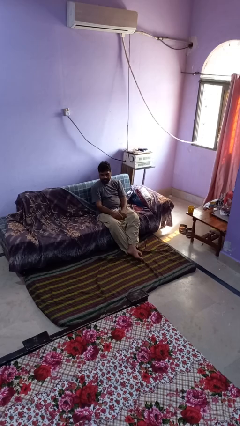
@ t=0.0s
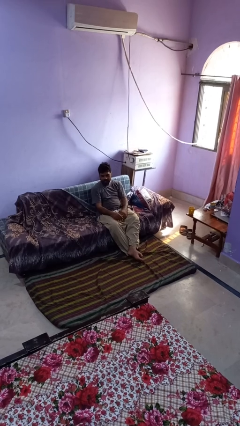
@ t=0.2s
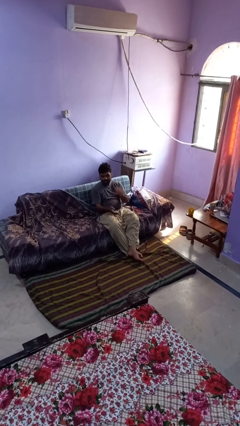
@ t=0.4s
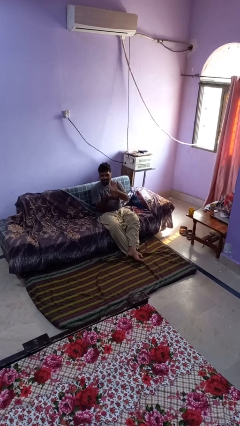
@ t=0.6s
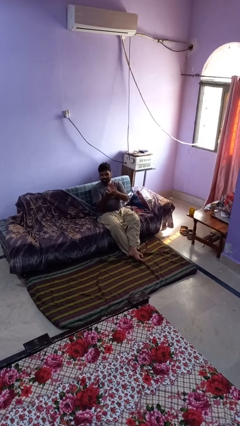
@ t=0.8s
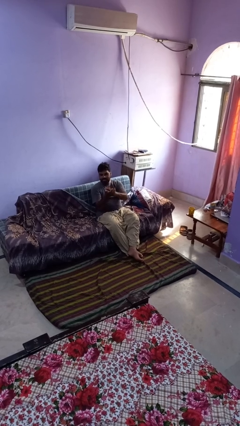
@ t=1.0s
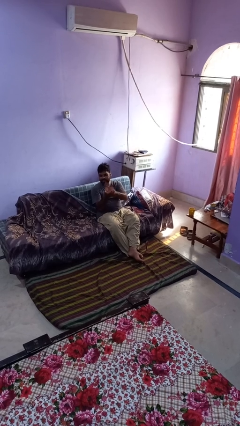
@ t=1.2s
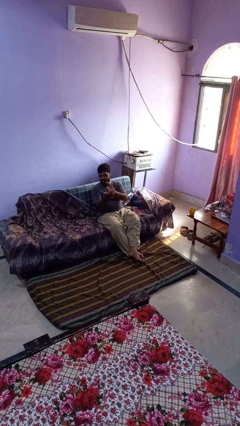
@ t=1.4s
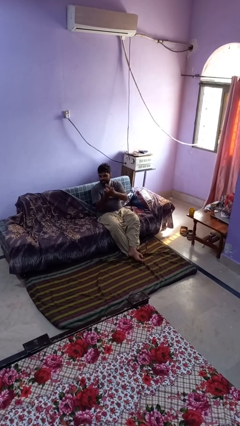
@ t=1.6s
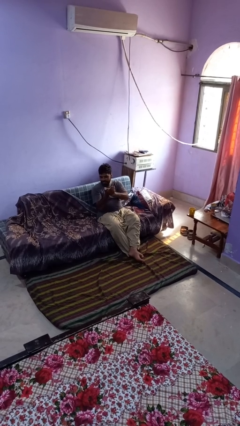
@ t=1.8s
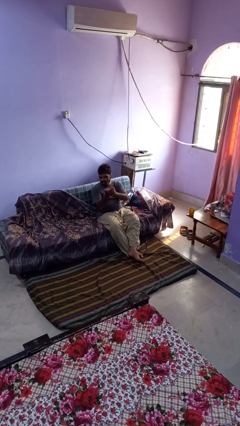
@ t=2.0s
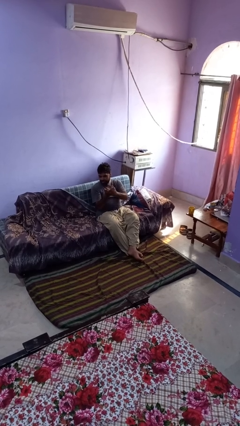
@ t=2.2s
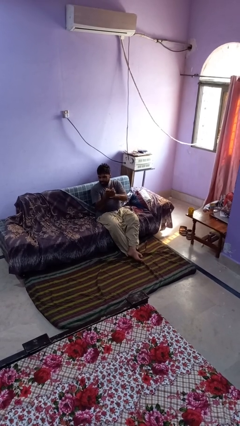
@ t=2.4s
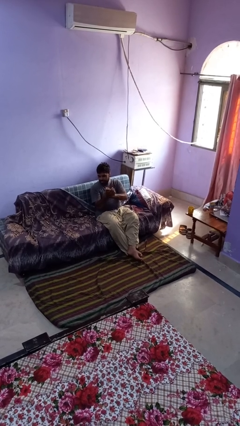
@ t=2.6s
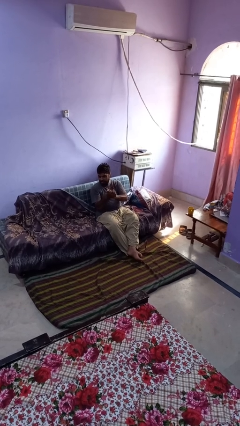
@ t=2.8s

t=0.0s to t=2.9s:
person claps hands

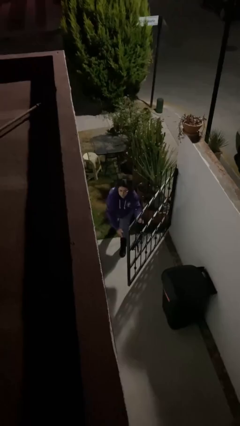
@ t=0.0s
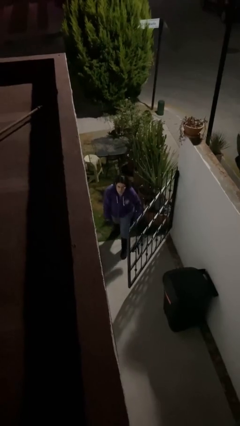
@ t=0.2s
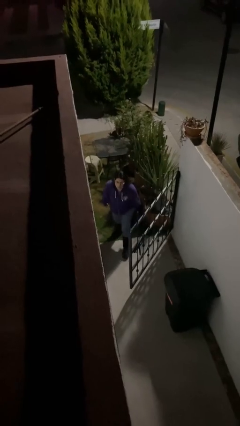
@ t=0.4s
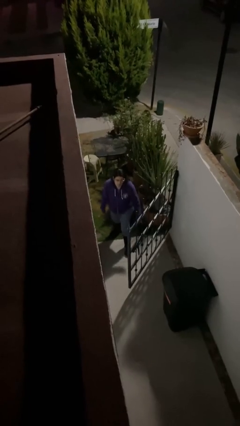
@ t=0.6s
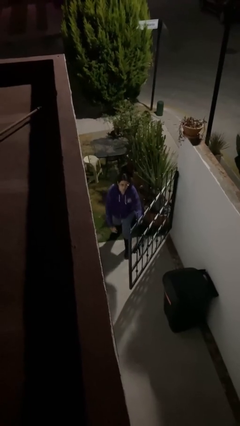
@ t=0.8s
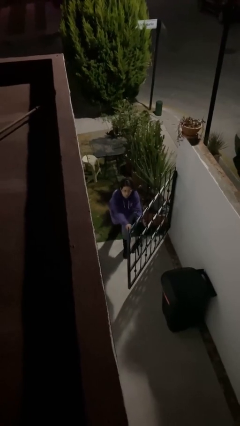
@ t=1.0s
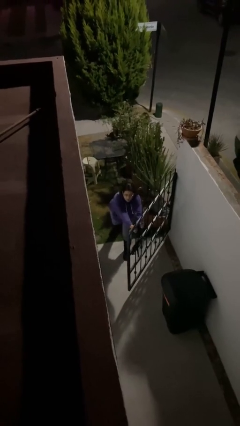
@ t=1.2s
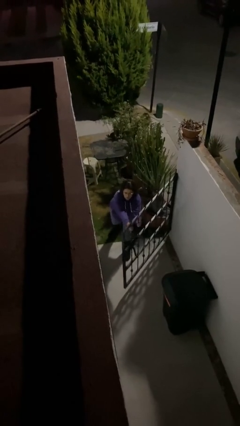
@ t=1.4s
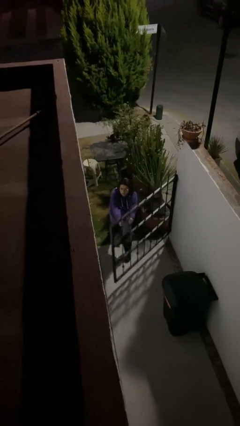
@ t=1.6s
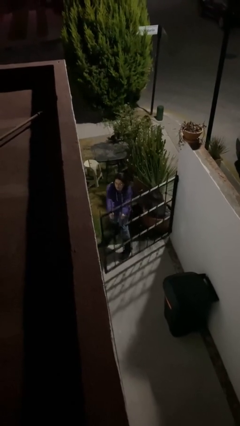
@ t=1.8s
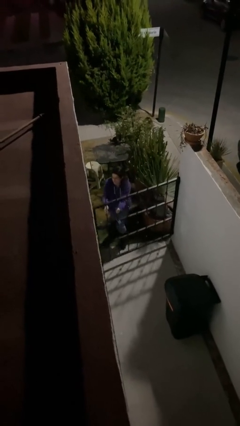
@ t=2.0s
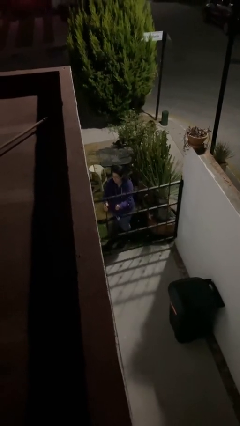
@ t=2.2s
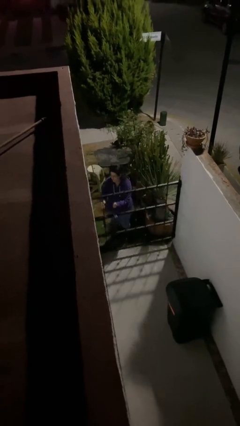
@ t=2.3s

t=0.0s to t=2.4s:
person closes facility door

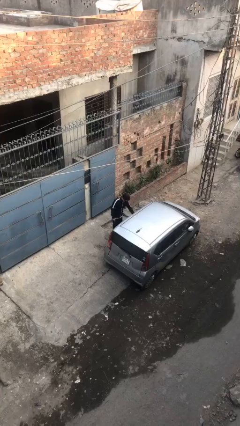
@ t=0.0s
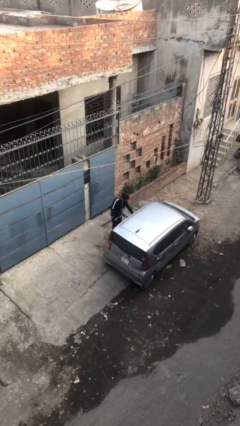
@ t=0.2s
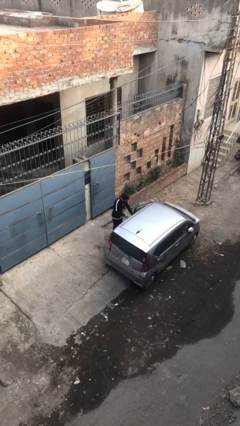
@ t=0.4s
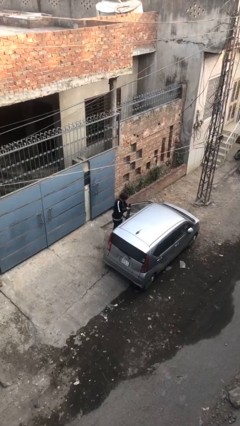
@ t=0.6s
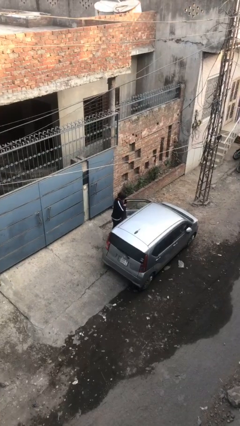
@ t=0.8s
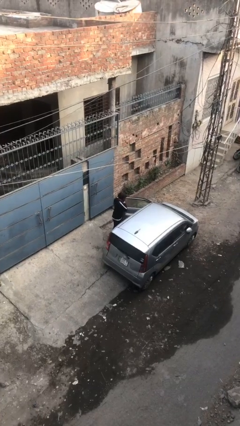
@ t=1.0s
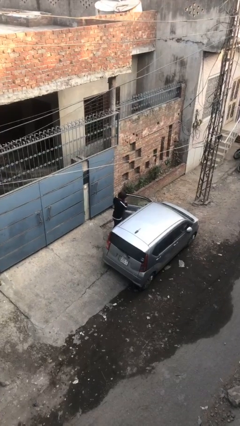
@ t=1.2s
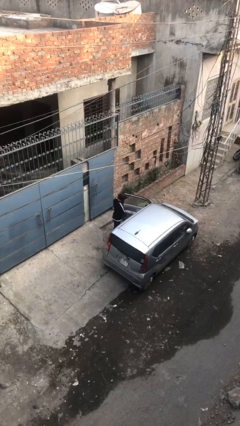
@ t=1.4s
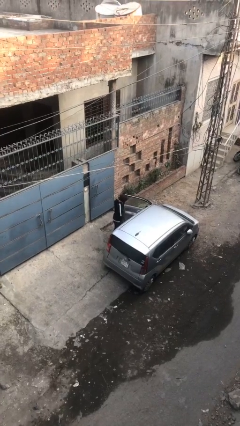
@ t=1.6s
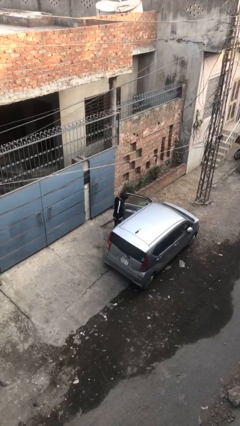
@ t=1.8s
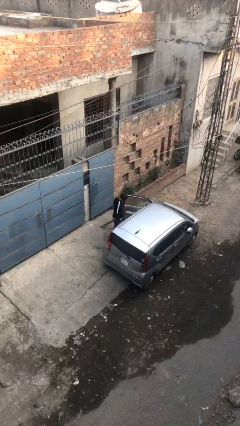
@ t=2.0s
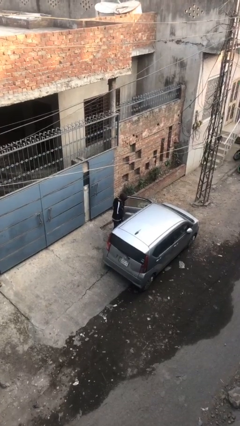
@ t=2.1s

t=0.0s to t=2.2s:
person opens car door

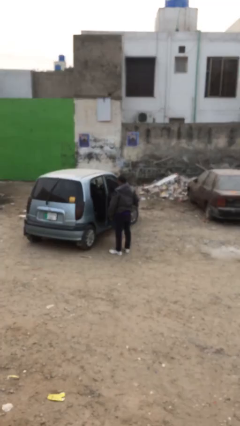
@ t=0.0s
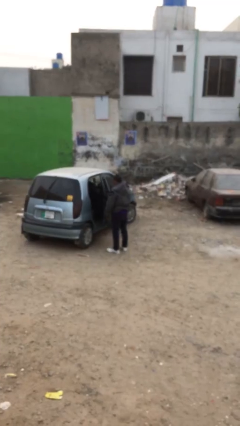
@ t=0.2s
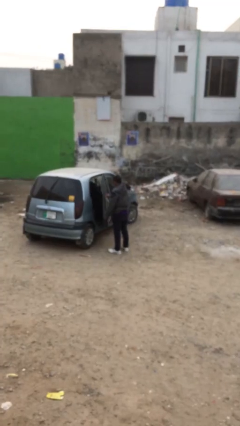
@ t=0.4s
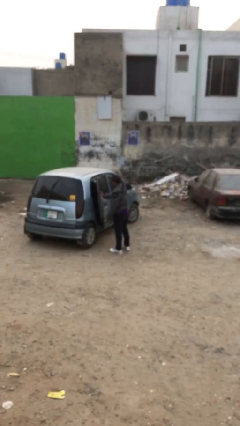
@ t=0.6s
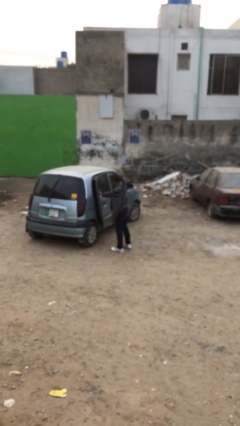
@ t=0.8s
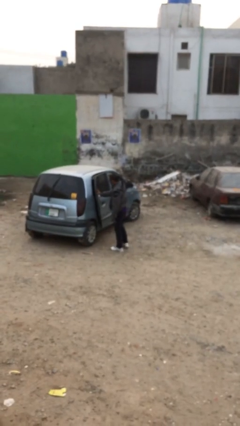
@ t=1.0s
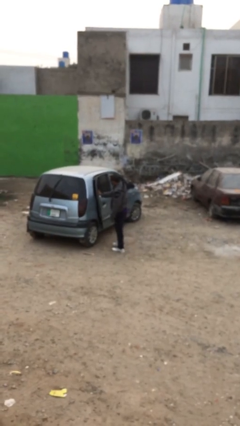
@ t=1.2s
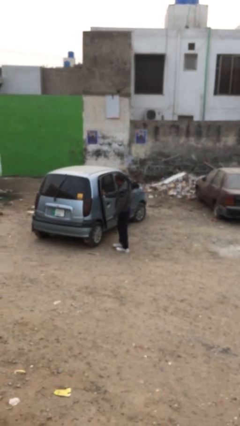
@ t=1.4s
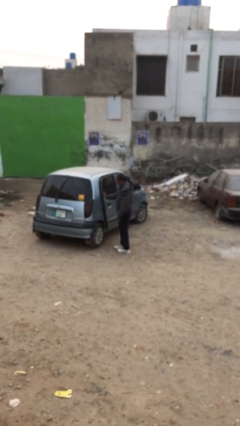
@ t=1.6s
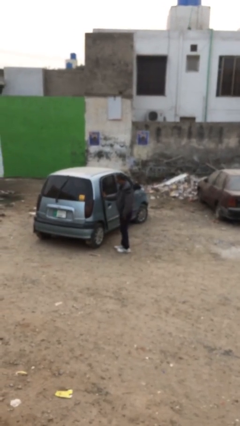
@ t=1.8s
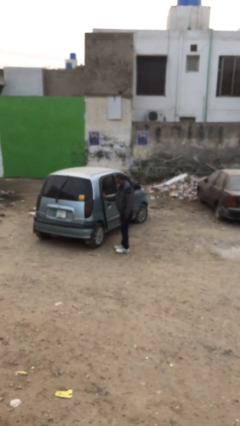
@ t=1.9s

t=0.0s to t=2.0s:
person closes car door

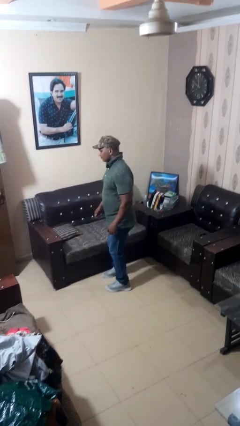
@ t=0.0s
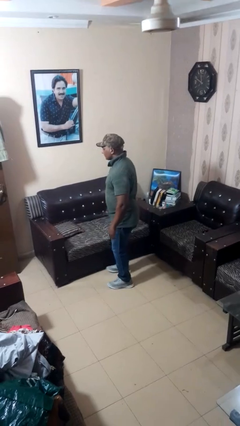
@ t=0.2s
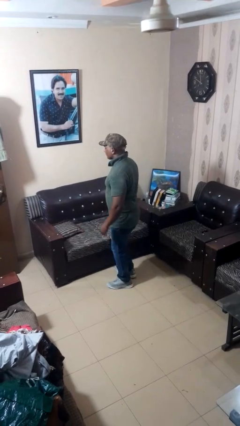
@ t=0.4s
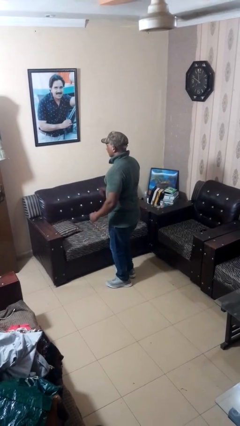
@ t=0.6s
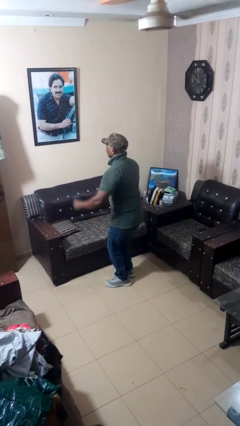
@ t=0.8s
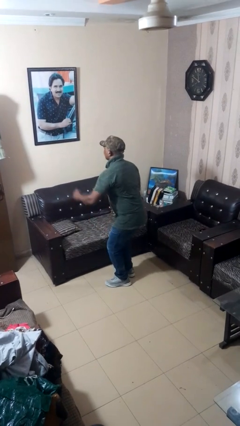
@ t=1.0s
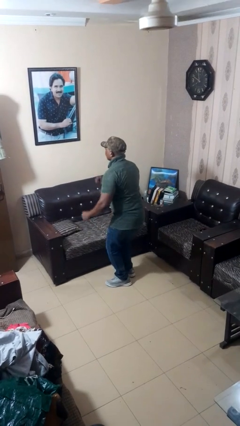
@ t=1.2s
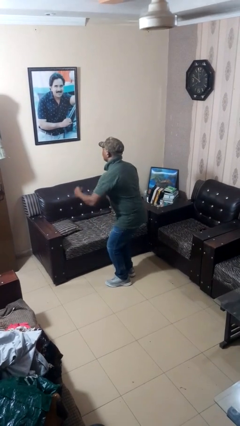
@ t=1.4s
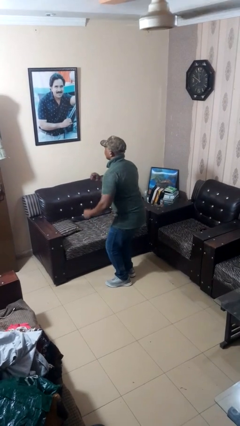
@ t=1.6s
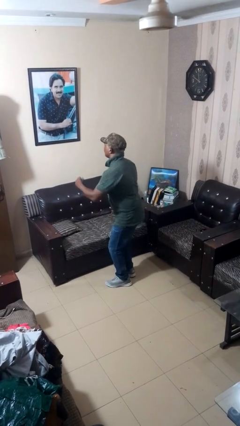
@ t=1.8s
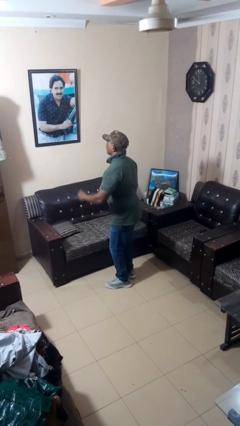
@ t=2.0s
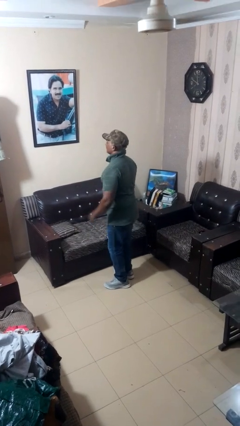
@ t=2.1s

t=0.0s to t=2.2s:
person wiggles hips

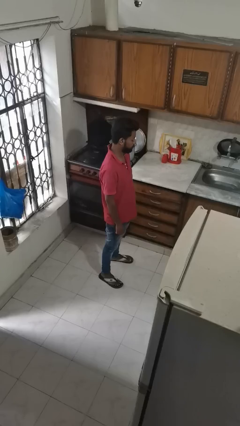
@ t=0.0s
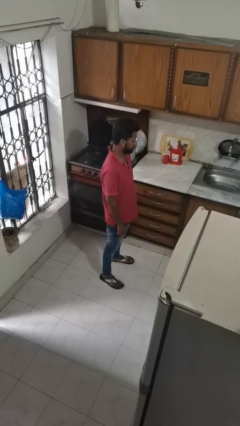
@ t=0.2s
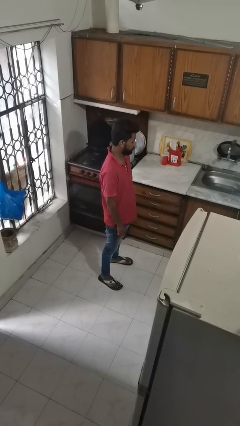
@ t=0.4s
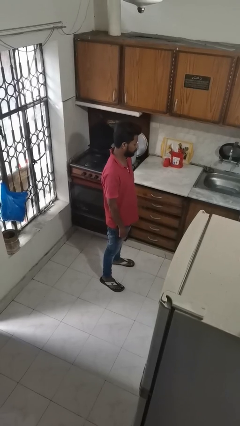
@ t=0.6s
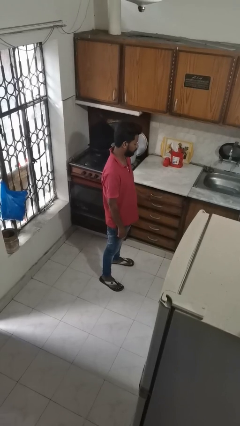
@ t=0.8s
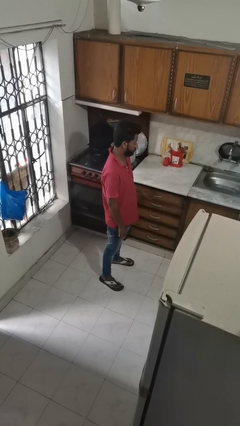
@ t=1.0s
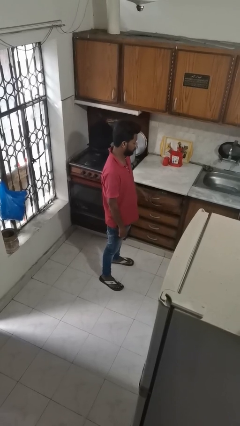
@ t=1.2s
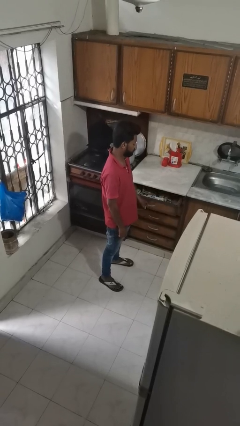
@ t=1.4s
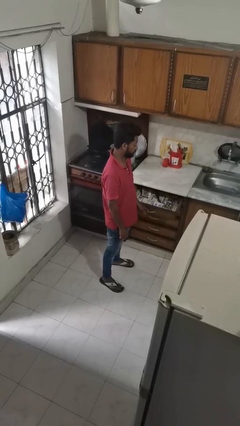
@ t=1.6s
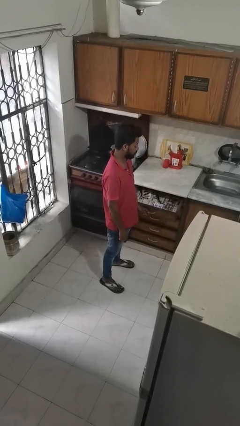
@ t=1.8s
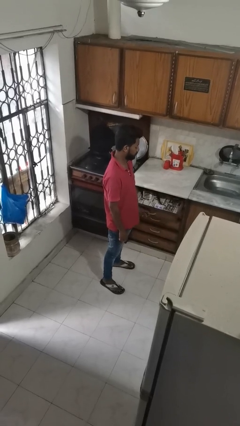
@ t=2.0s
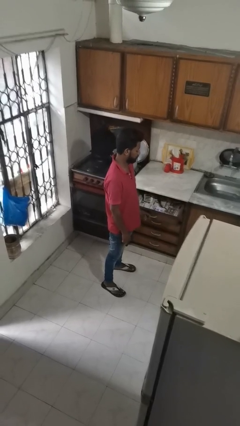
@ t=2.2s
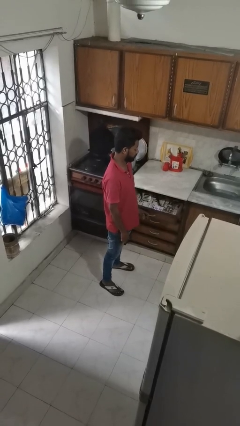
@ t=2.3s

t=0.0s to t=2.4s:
person opens kitchen drawer

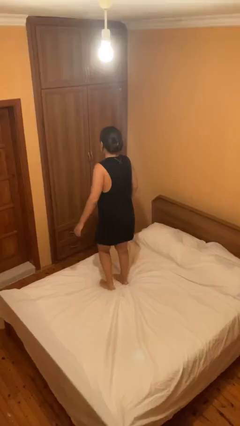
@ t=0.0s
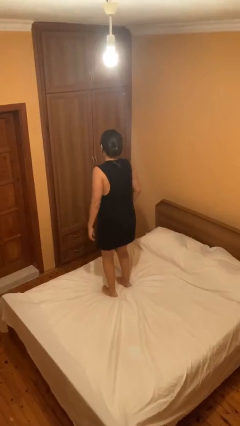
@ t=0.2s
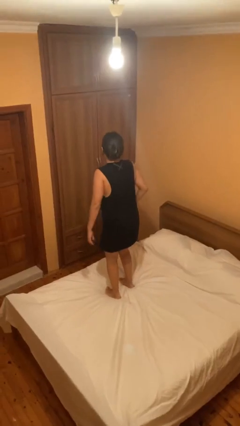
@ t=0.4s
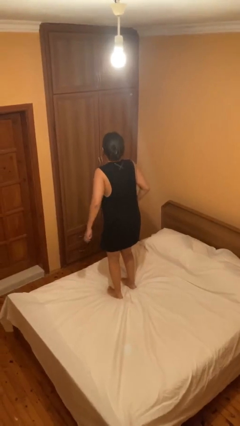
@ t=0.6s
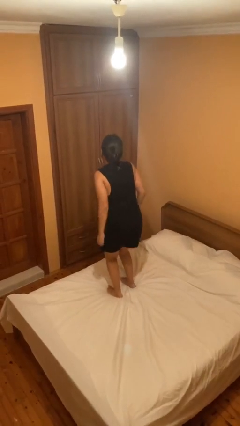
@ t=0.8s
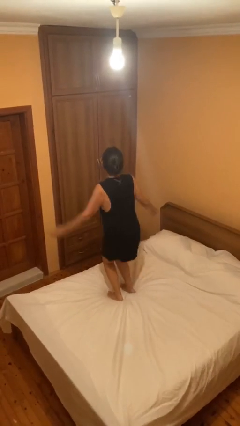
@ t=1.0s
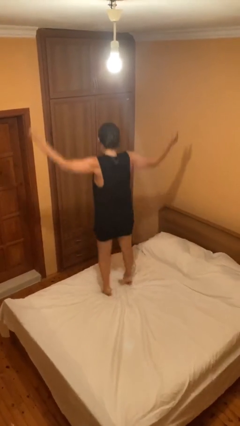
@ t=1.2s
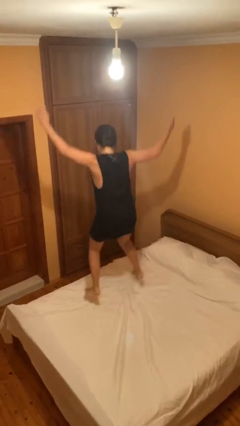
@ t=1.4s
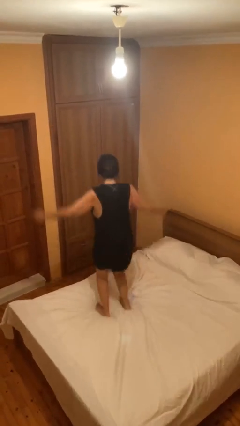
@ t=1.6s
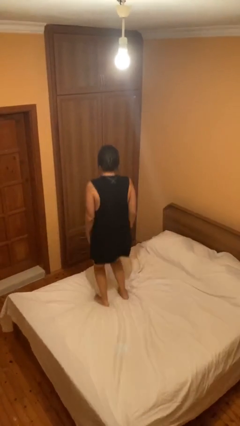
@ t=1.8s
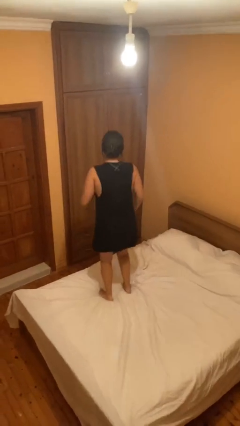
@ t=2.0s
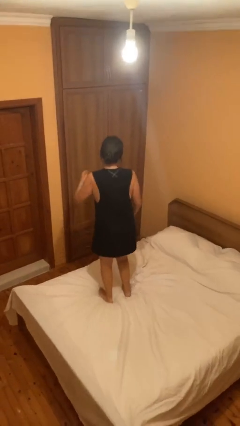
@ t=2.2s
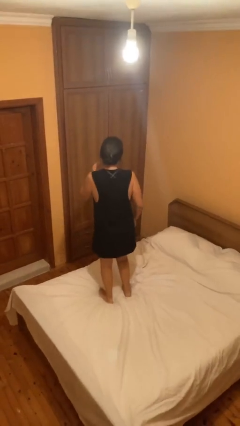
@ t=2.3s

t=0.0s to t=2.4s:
person jumps on bed

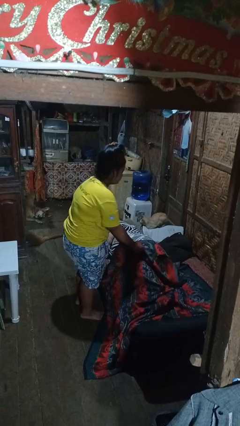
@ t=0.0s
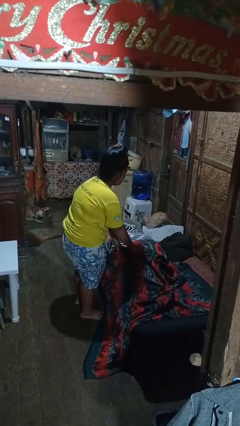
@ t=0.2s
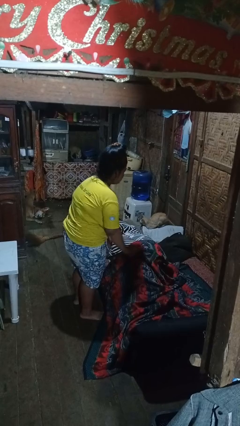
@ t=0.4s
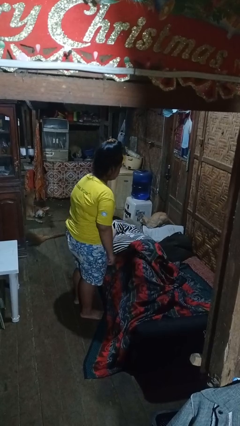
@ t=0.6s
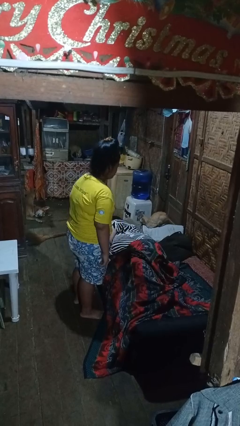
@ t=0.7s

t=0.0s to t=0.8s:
person uncovers friend with blanket
